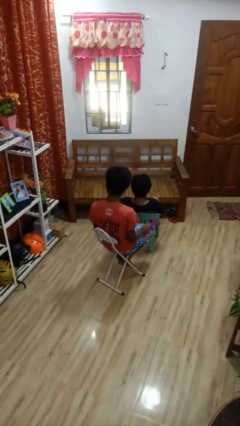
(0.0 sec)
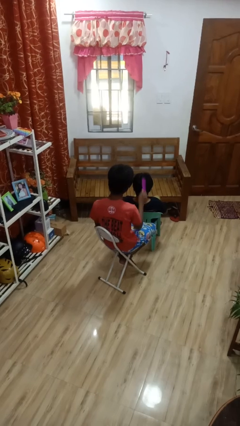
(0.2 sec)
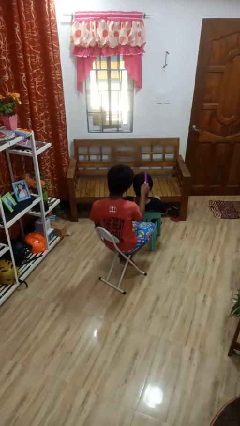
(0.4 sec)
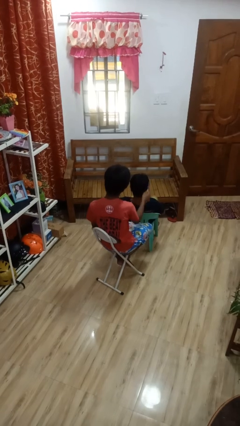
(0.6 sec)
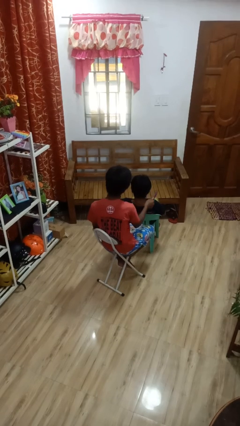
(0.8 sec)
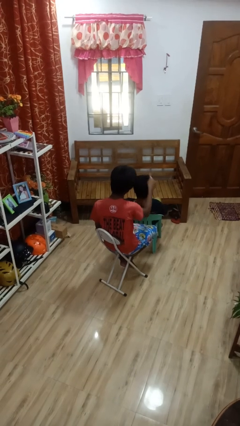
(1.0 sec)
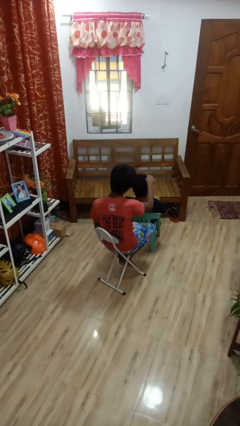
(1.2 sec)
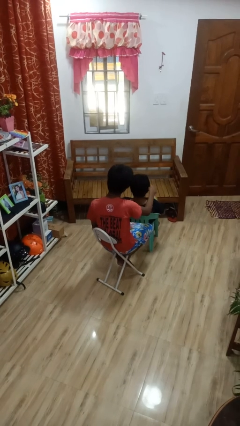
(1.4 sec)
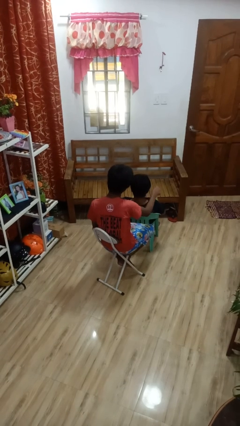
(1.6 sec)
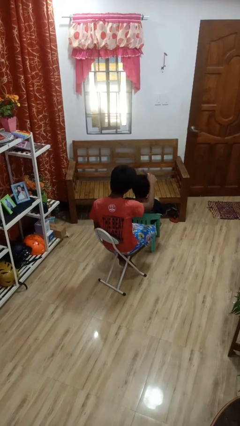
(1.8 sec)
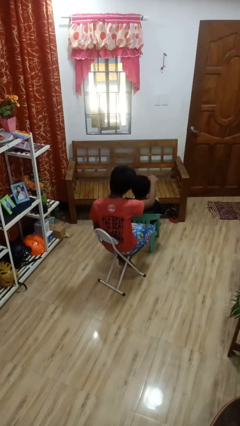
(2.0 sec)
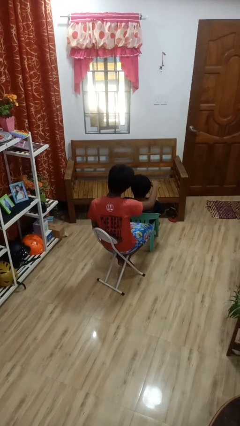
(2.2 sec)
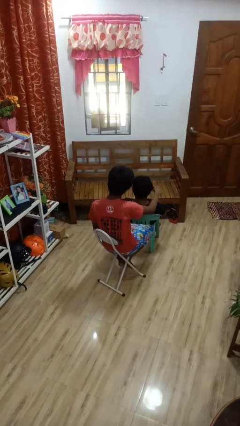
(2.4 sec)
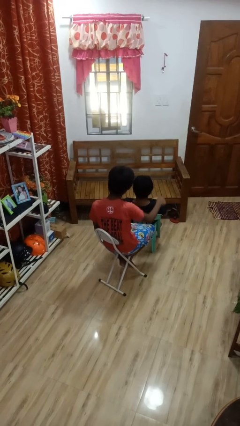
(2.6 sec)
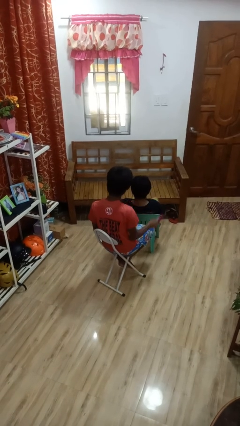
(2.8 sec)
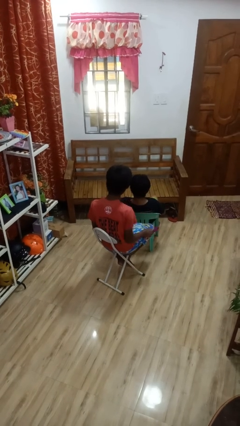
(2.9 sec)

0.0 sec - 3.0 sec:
person brushes hair of person

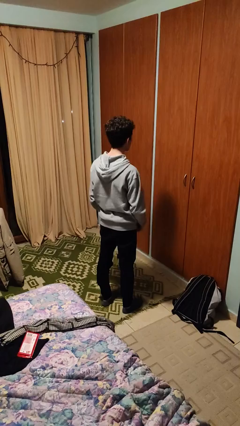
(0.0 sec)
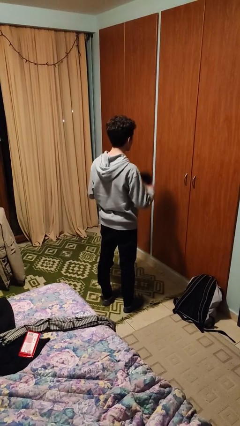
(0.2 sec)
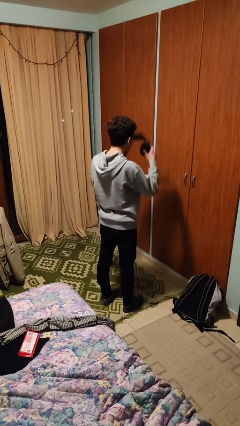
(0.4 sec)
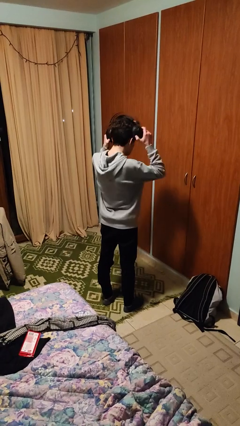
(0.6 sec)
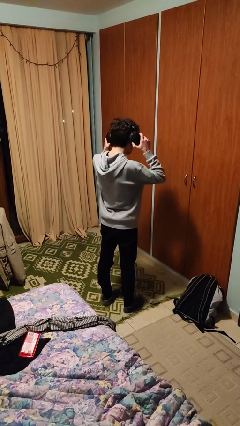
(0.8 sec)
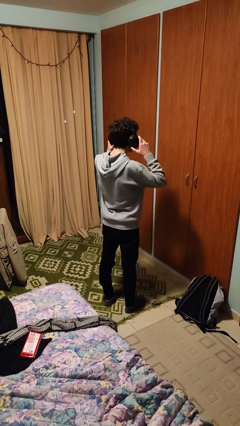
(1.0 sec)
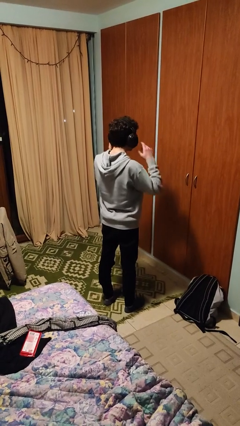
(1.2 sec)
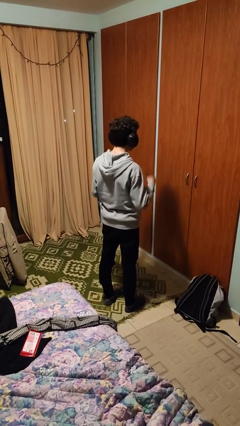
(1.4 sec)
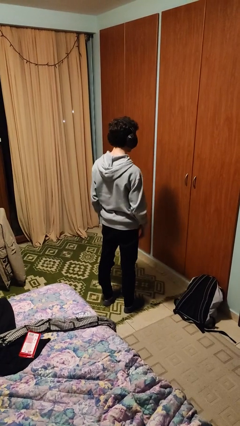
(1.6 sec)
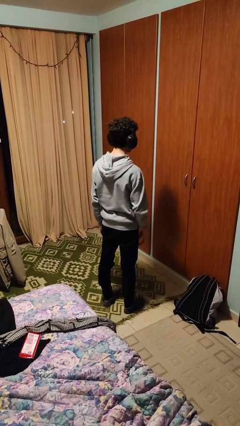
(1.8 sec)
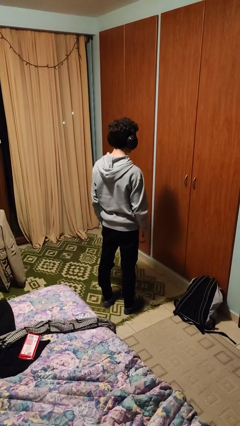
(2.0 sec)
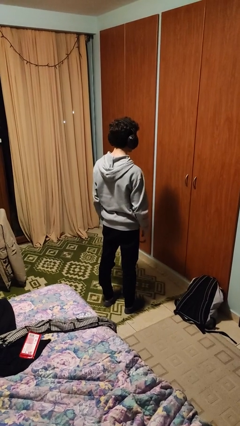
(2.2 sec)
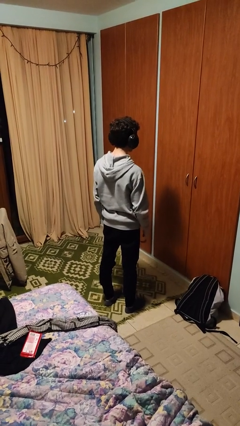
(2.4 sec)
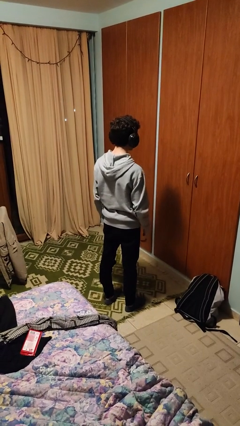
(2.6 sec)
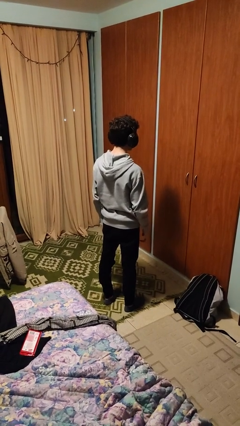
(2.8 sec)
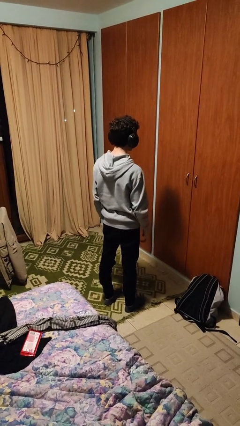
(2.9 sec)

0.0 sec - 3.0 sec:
person puts on headphones

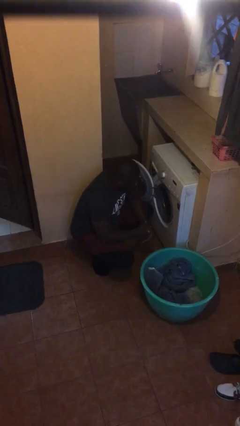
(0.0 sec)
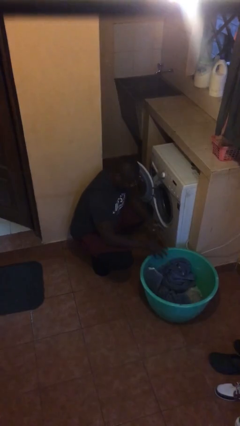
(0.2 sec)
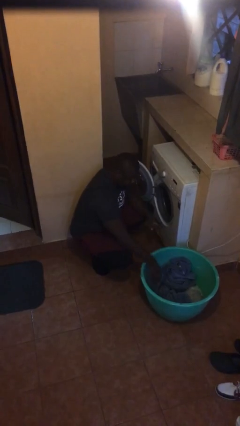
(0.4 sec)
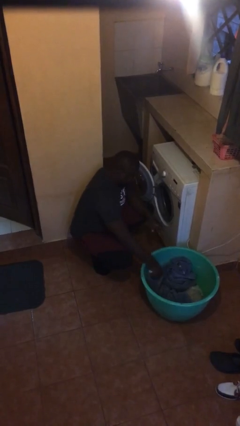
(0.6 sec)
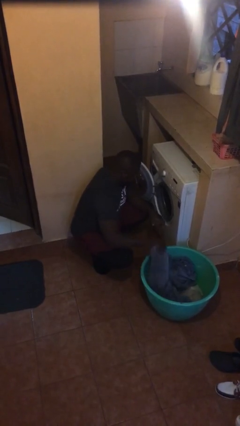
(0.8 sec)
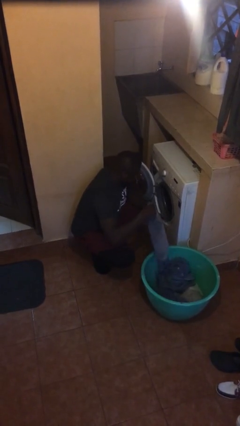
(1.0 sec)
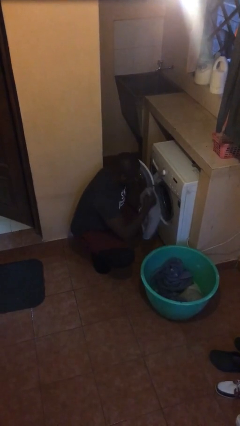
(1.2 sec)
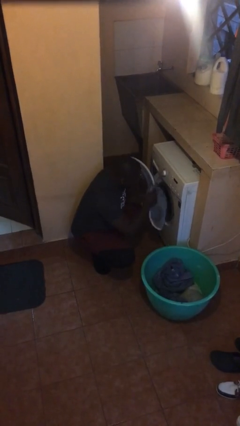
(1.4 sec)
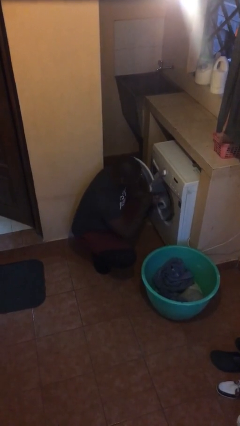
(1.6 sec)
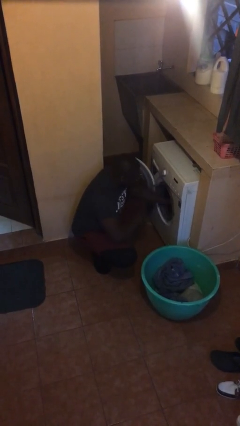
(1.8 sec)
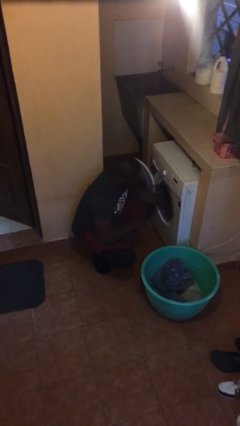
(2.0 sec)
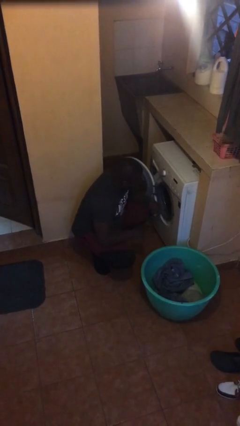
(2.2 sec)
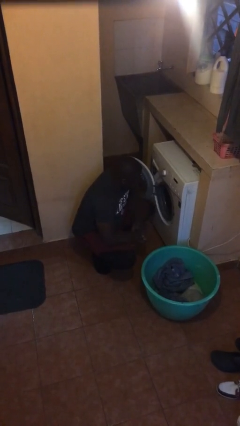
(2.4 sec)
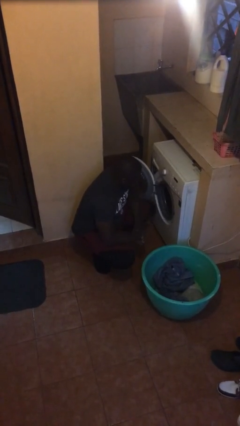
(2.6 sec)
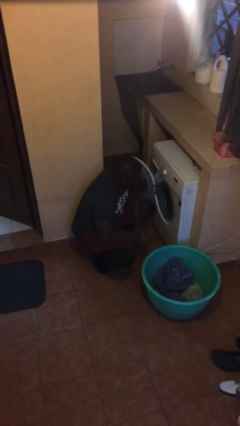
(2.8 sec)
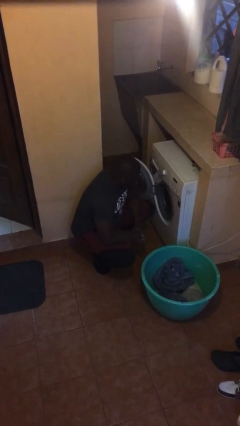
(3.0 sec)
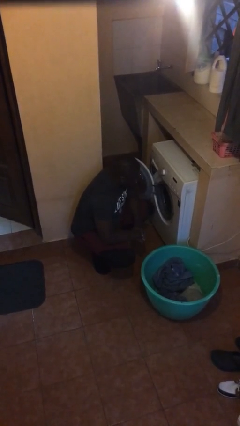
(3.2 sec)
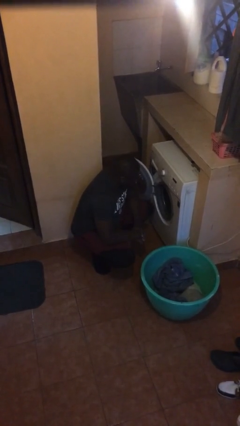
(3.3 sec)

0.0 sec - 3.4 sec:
person loads dryer

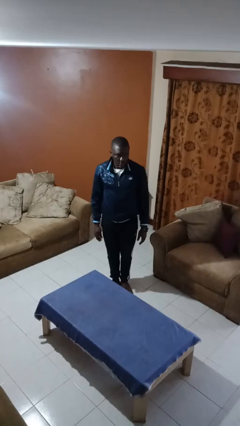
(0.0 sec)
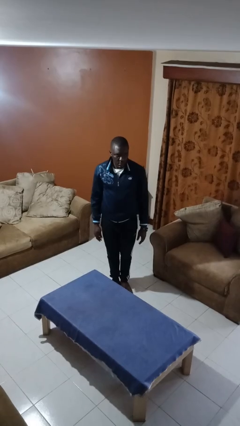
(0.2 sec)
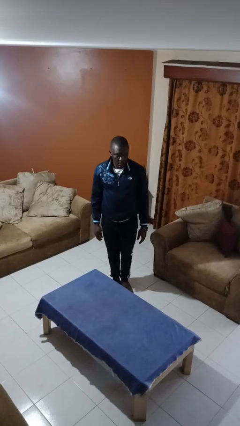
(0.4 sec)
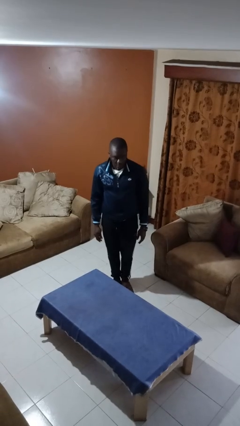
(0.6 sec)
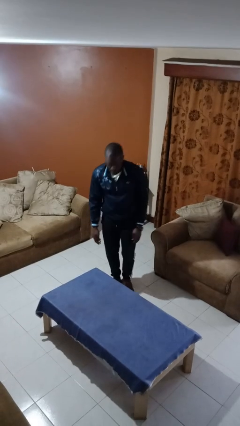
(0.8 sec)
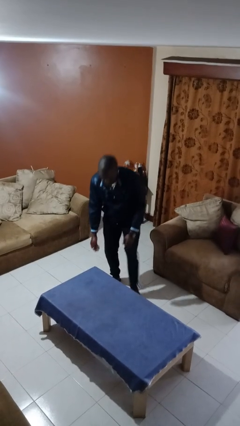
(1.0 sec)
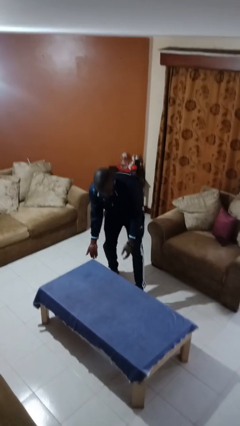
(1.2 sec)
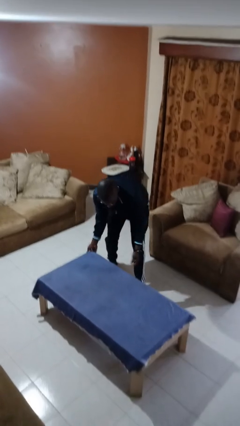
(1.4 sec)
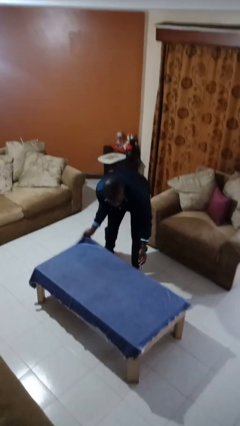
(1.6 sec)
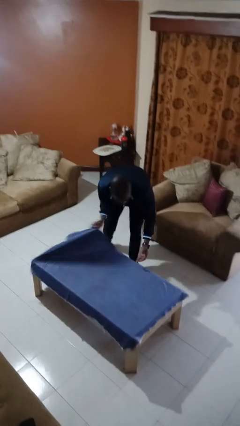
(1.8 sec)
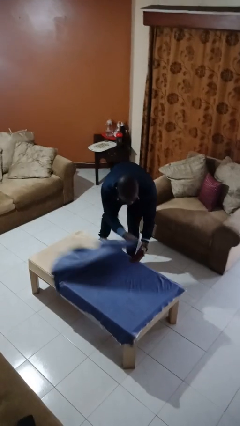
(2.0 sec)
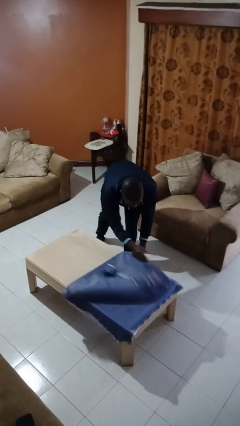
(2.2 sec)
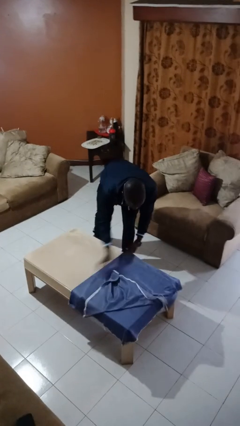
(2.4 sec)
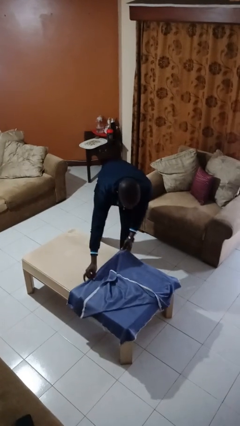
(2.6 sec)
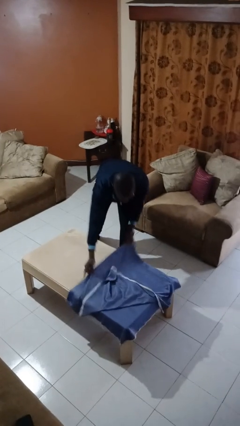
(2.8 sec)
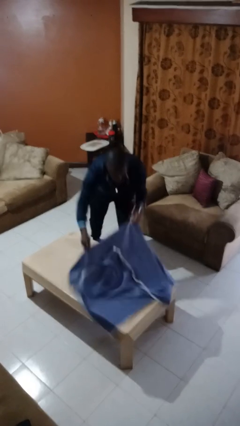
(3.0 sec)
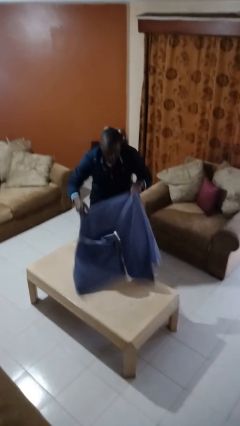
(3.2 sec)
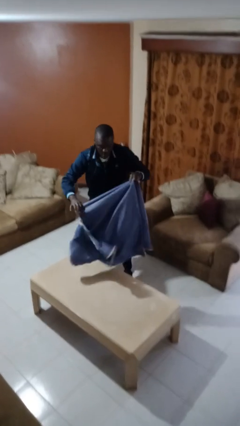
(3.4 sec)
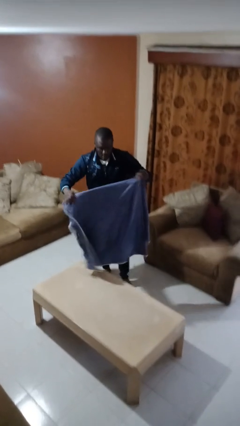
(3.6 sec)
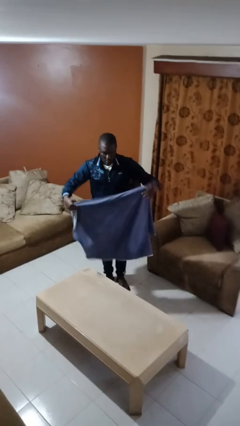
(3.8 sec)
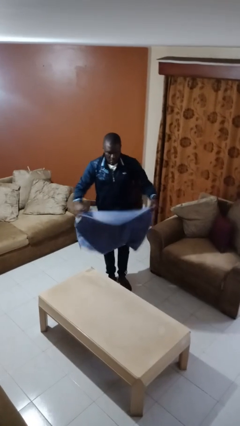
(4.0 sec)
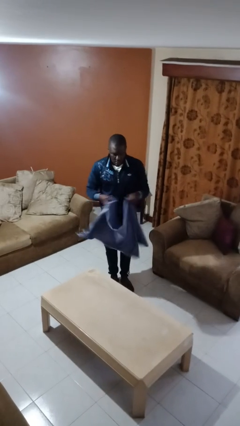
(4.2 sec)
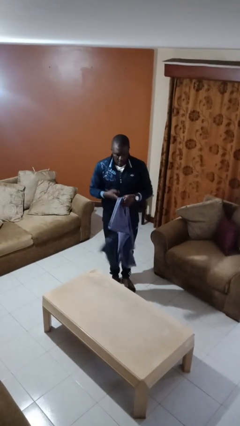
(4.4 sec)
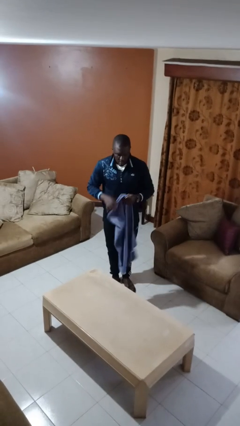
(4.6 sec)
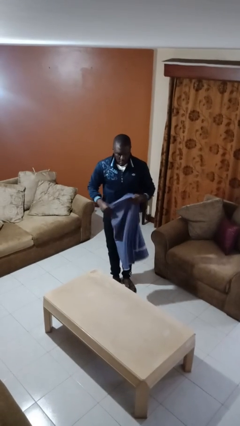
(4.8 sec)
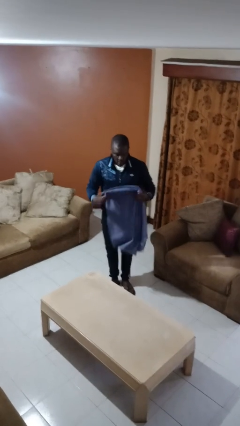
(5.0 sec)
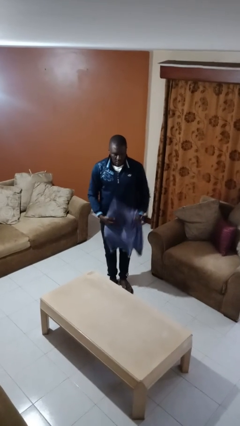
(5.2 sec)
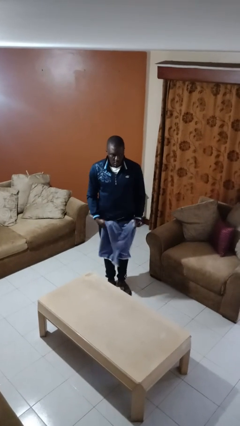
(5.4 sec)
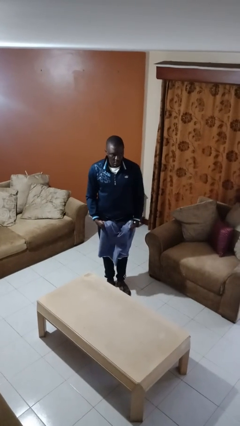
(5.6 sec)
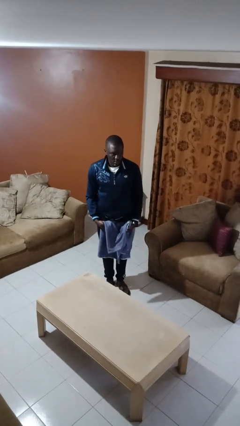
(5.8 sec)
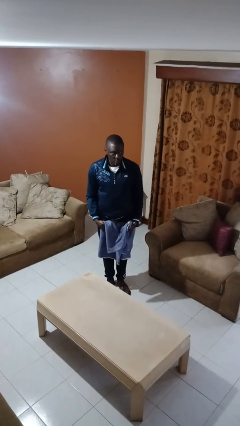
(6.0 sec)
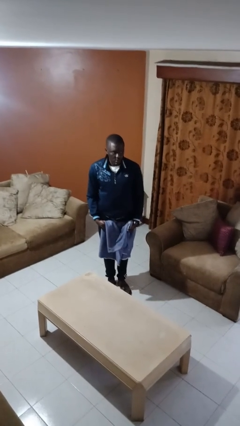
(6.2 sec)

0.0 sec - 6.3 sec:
person folds tablecloth

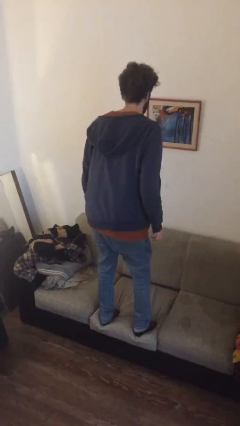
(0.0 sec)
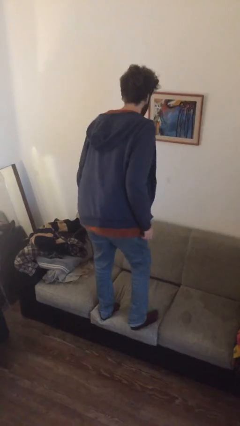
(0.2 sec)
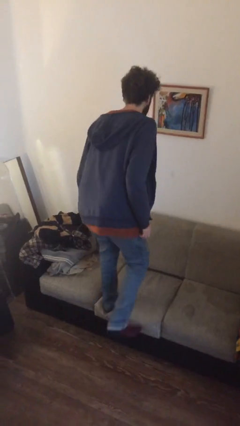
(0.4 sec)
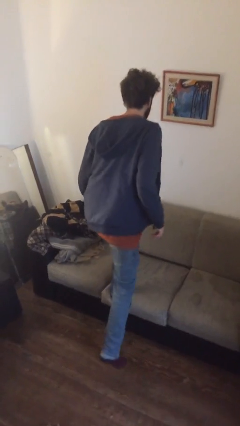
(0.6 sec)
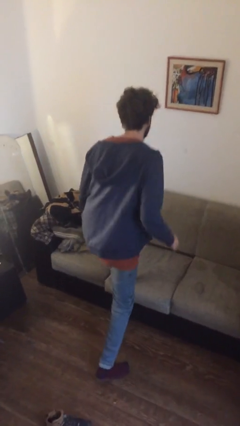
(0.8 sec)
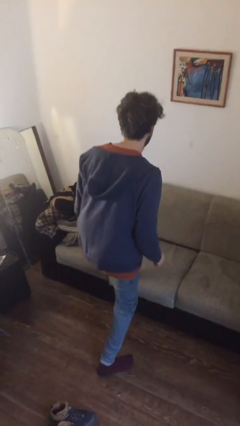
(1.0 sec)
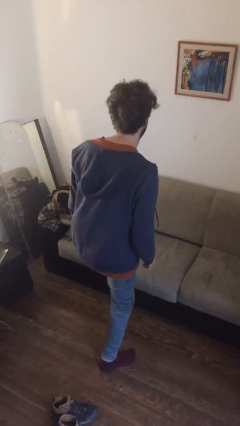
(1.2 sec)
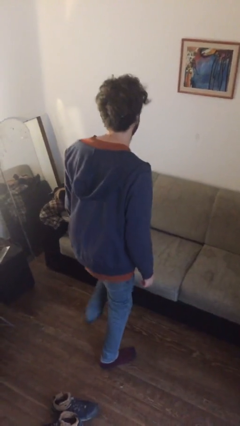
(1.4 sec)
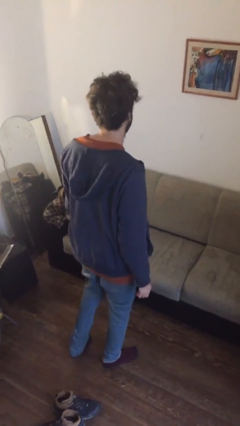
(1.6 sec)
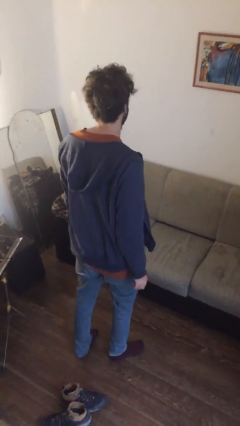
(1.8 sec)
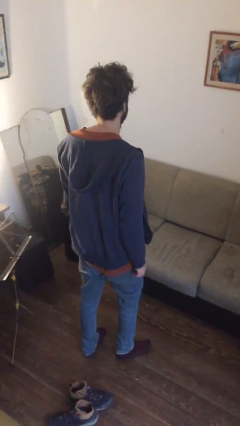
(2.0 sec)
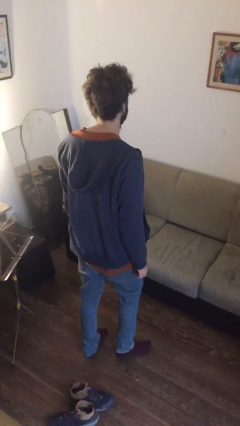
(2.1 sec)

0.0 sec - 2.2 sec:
person climbs off couch
